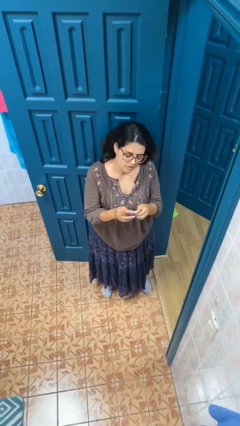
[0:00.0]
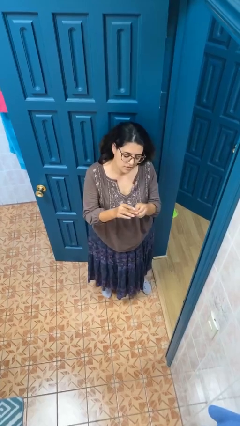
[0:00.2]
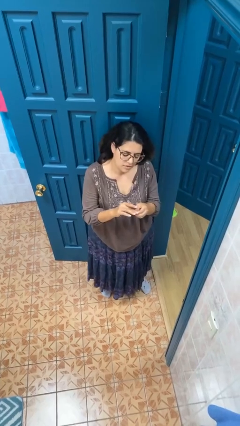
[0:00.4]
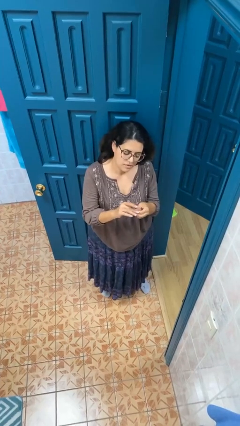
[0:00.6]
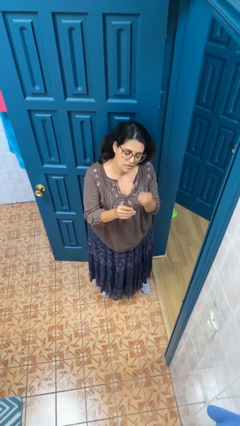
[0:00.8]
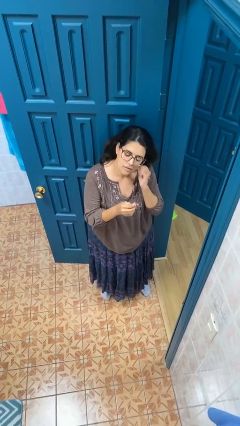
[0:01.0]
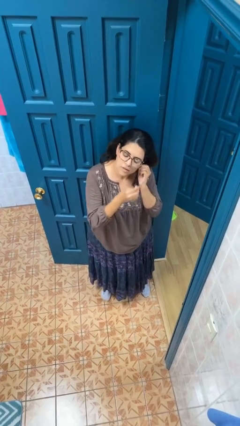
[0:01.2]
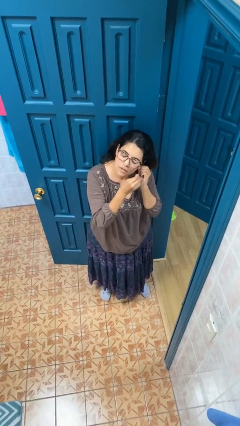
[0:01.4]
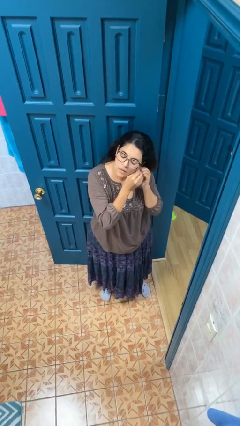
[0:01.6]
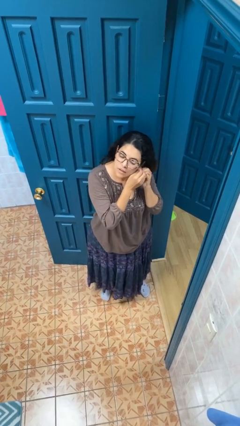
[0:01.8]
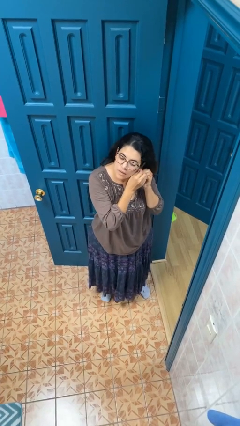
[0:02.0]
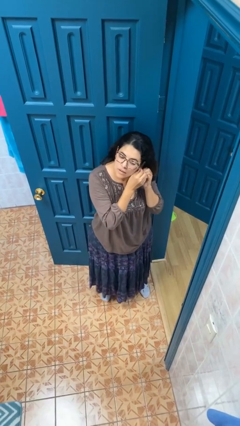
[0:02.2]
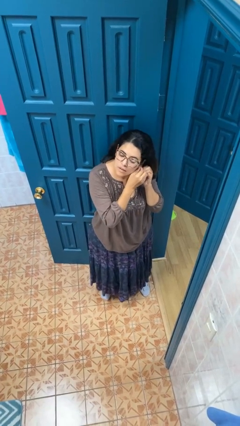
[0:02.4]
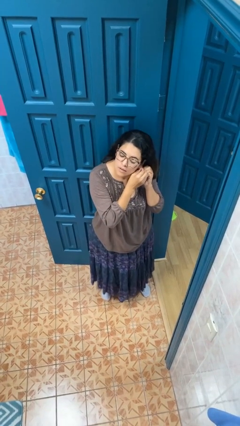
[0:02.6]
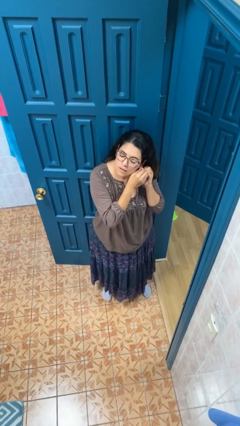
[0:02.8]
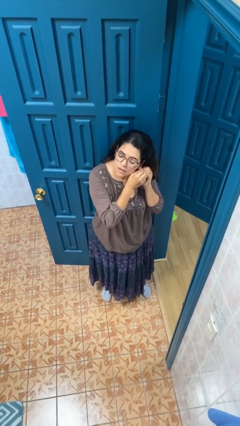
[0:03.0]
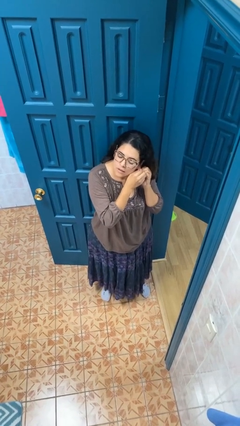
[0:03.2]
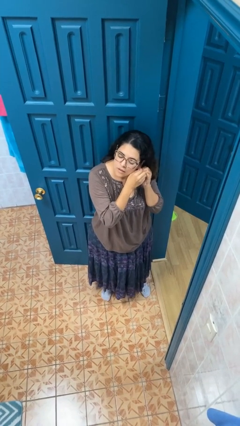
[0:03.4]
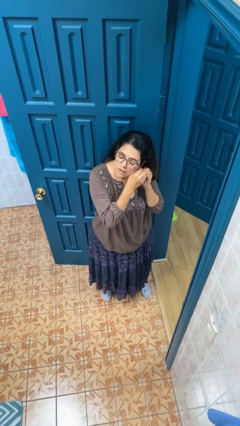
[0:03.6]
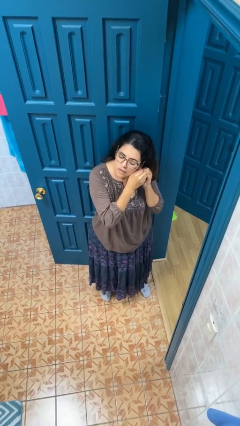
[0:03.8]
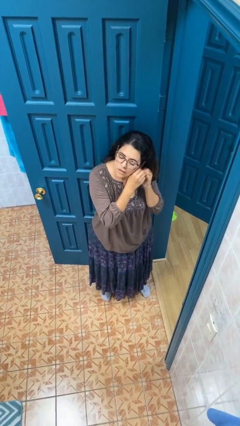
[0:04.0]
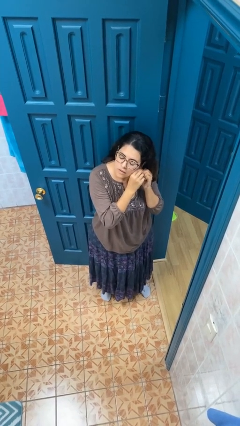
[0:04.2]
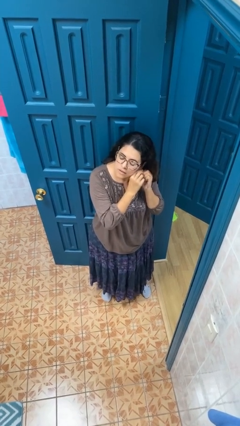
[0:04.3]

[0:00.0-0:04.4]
person puts on earrings

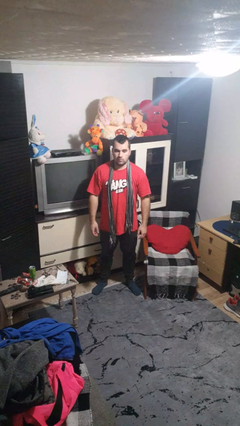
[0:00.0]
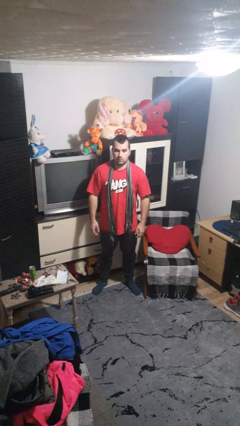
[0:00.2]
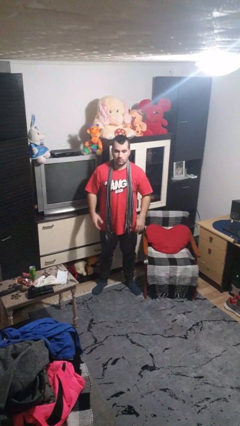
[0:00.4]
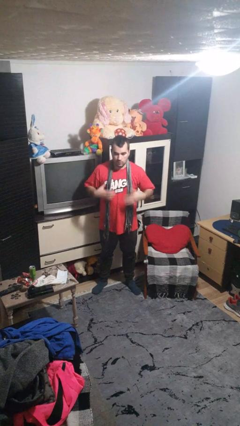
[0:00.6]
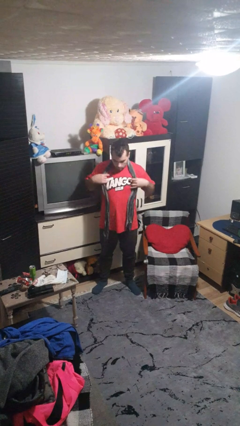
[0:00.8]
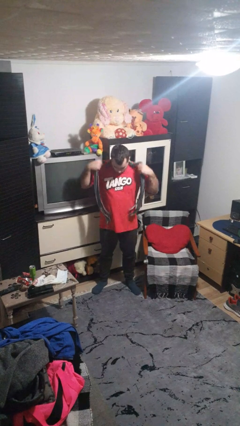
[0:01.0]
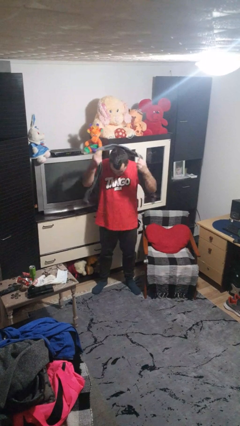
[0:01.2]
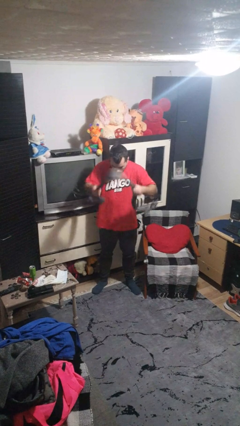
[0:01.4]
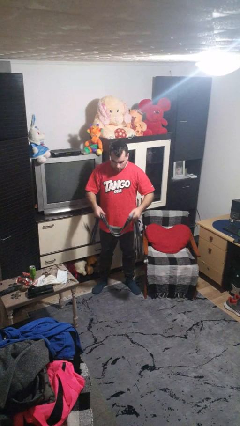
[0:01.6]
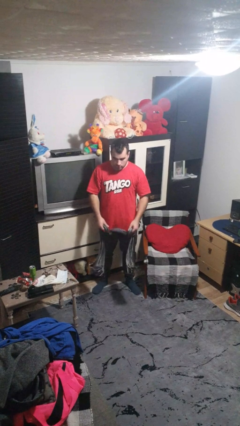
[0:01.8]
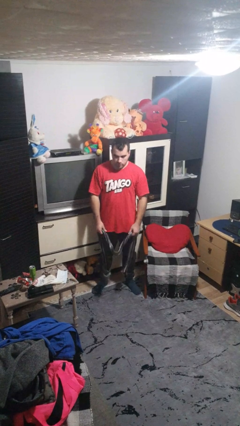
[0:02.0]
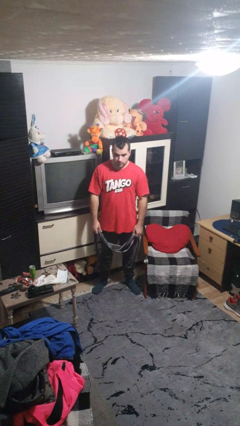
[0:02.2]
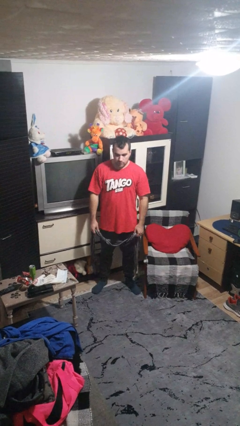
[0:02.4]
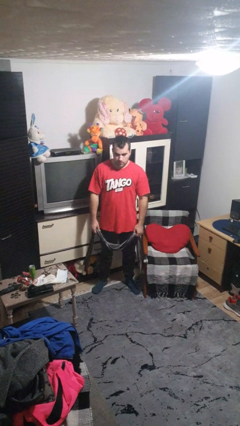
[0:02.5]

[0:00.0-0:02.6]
person takes off scarf

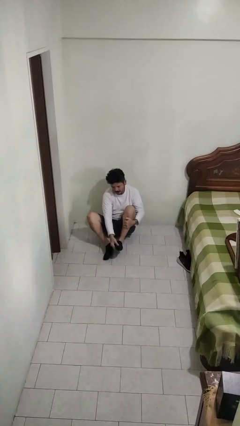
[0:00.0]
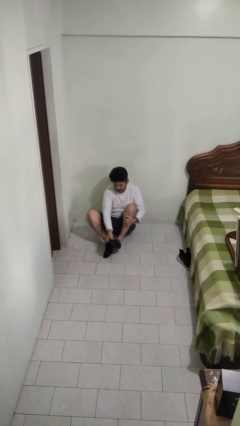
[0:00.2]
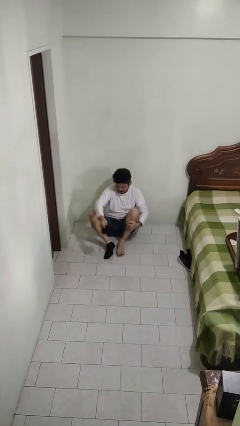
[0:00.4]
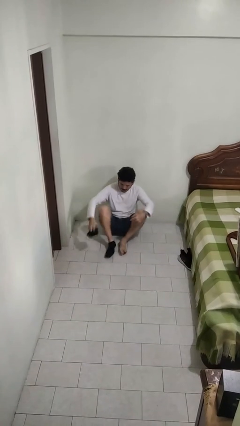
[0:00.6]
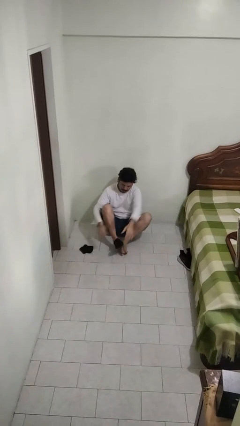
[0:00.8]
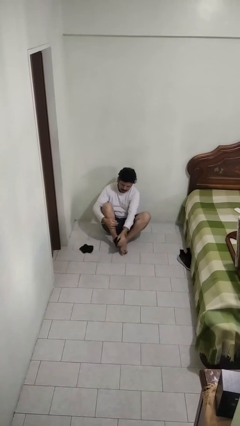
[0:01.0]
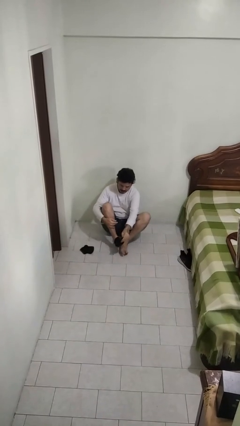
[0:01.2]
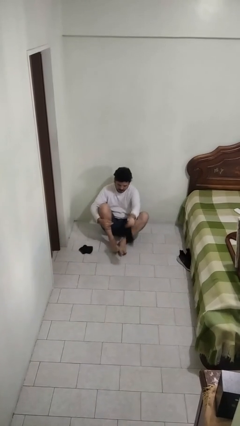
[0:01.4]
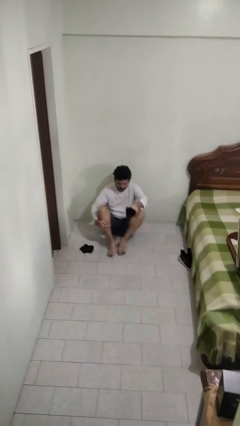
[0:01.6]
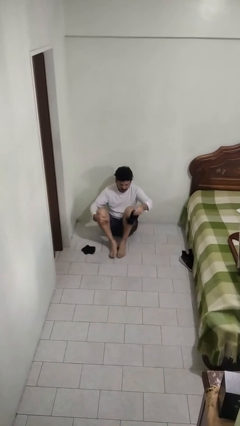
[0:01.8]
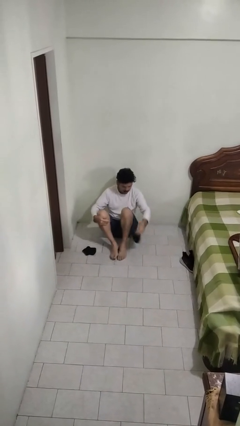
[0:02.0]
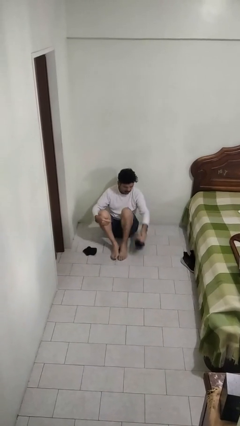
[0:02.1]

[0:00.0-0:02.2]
person takes off socks

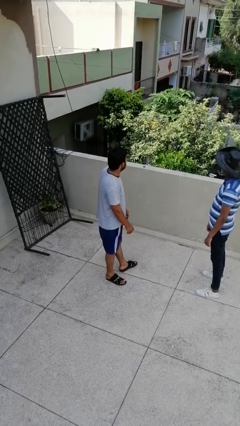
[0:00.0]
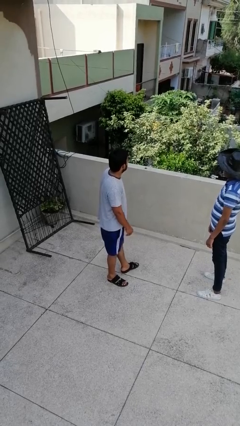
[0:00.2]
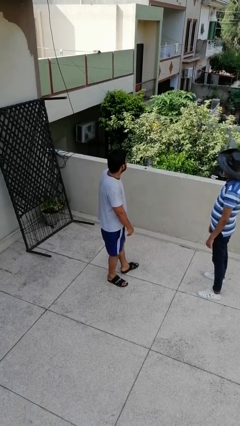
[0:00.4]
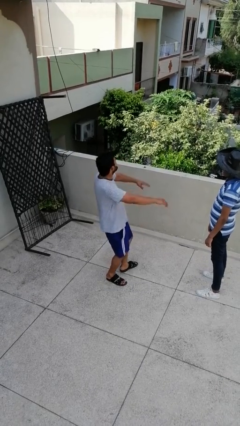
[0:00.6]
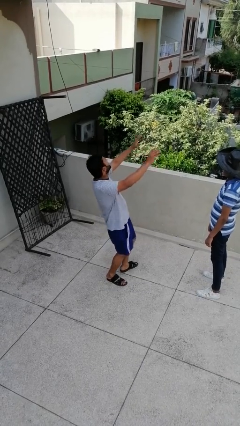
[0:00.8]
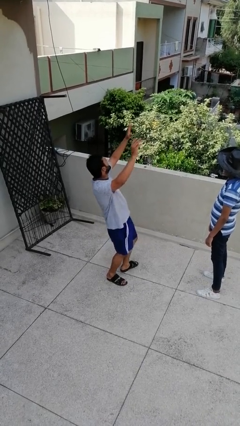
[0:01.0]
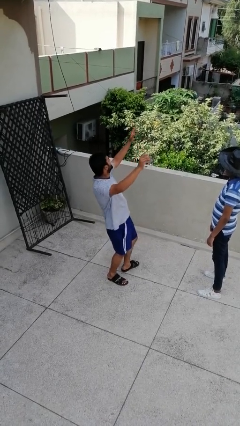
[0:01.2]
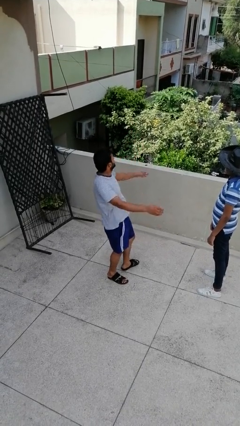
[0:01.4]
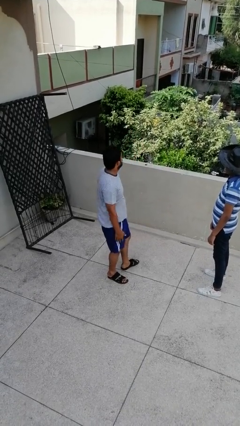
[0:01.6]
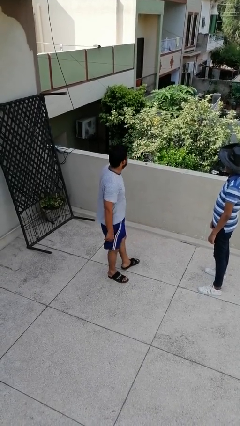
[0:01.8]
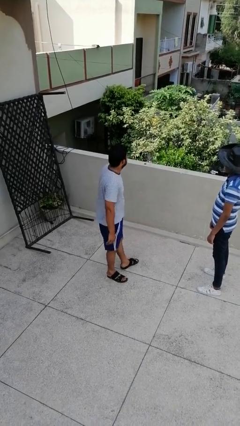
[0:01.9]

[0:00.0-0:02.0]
person laughs with person

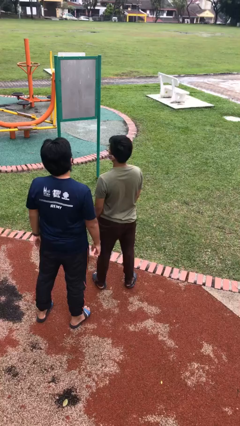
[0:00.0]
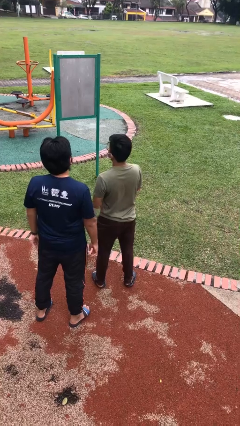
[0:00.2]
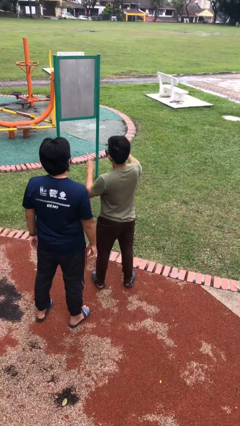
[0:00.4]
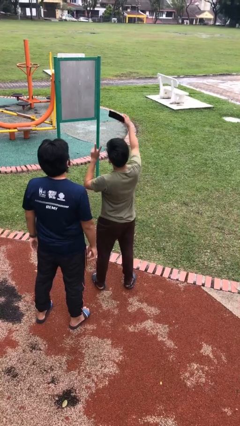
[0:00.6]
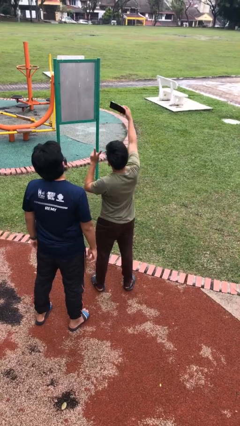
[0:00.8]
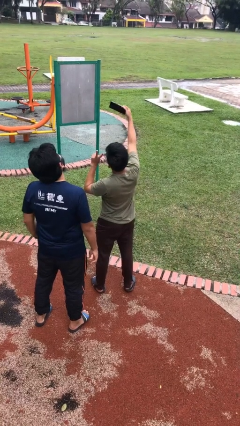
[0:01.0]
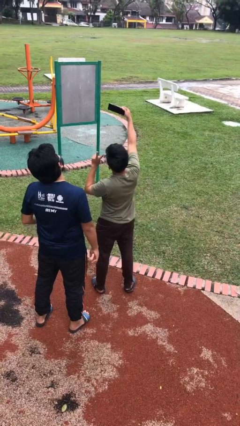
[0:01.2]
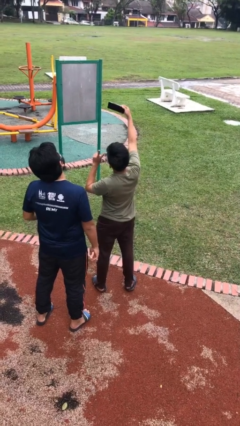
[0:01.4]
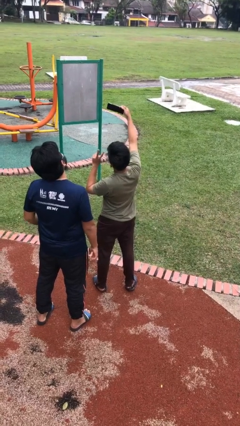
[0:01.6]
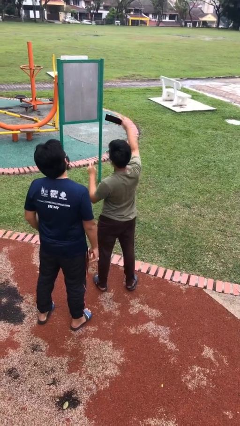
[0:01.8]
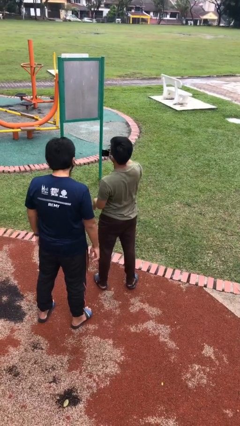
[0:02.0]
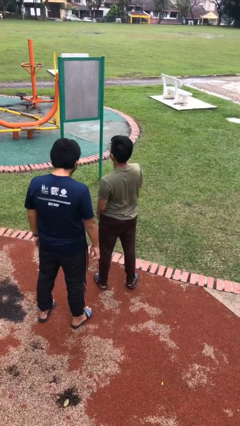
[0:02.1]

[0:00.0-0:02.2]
person takes selfie with person

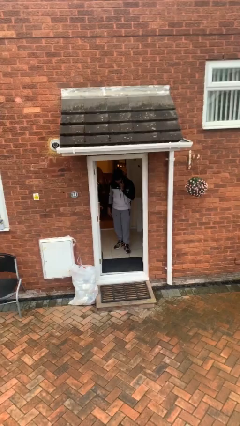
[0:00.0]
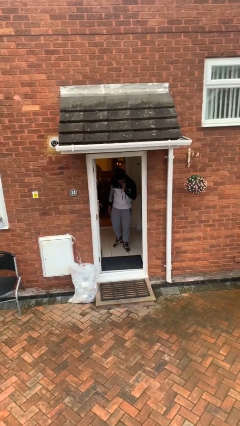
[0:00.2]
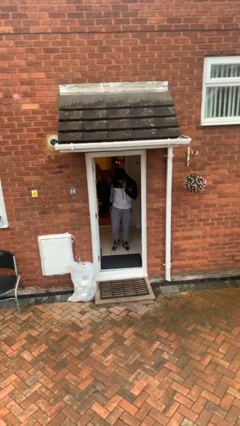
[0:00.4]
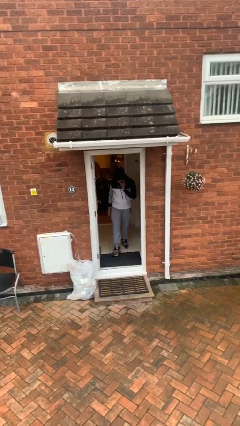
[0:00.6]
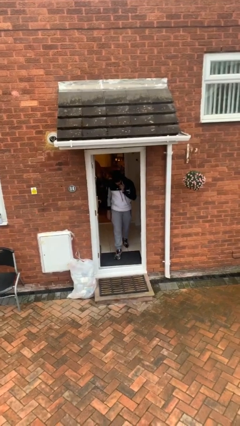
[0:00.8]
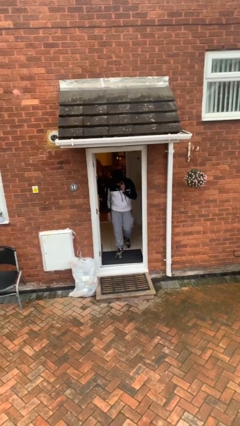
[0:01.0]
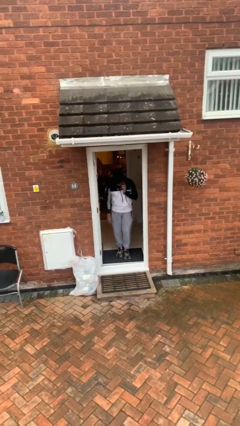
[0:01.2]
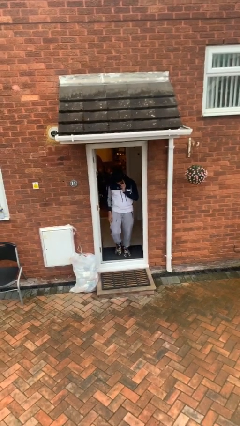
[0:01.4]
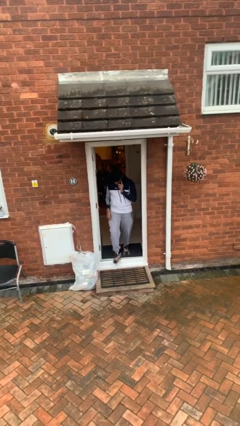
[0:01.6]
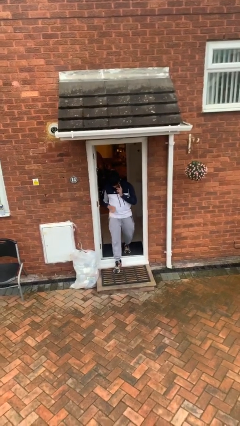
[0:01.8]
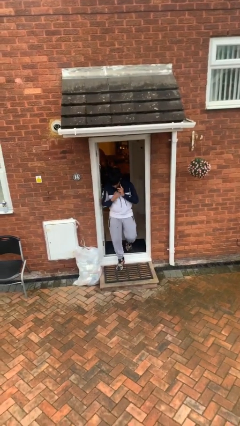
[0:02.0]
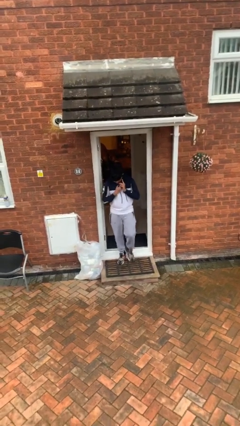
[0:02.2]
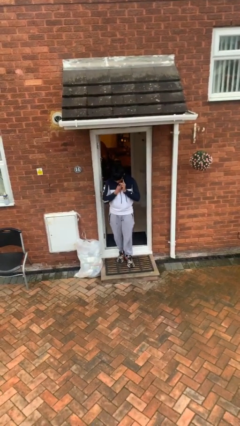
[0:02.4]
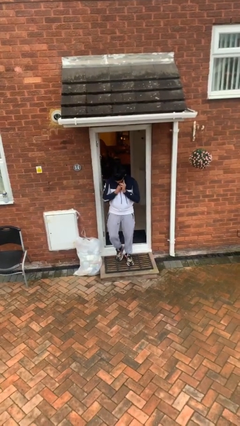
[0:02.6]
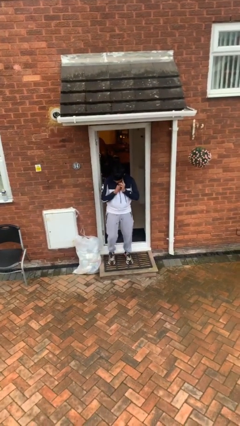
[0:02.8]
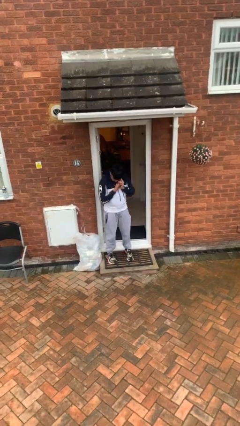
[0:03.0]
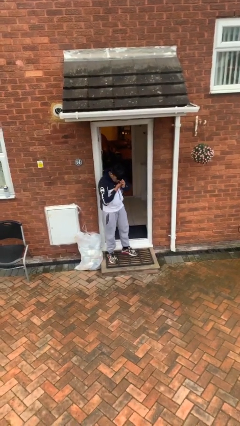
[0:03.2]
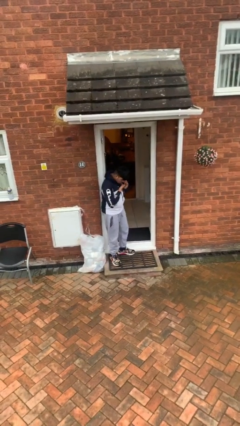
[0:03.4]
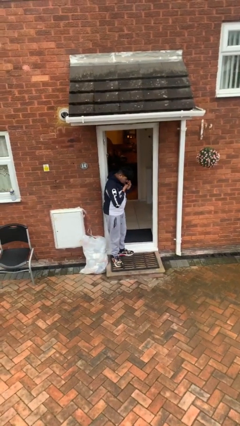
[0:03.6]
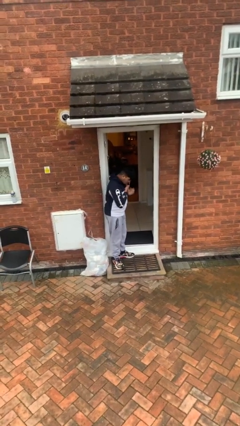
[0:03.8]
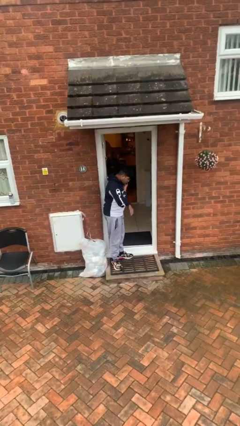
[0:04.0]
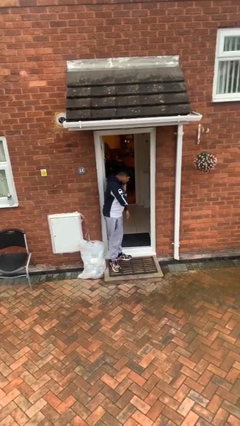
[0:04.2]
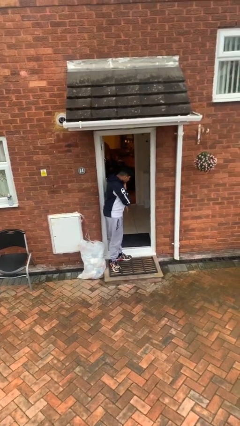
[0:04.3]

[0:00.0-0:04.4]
person enters scene through structure
